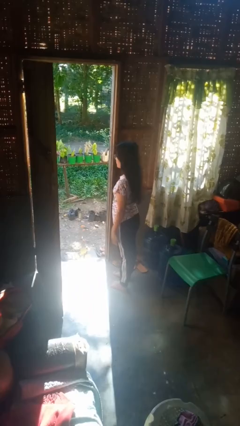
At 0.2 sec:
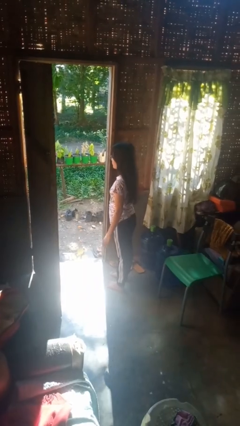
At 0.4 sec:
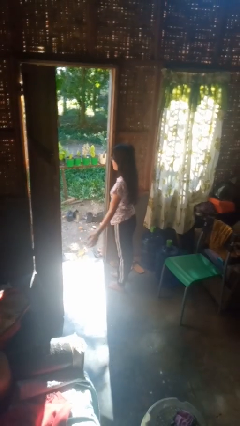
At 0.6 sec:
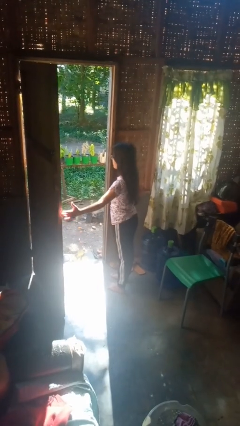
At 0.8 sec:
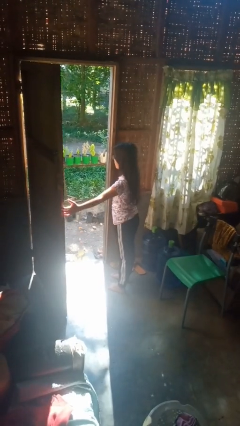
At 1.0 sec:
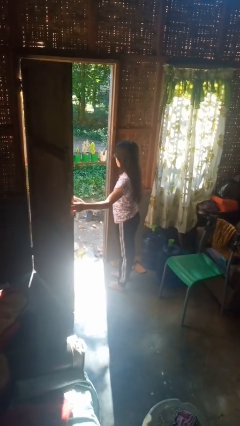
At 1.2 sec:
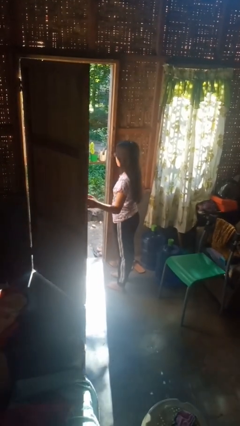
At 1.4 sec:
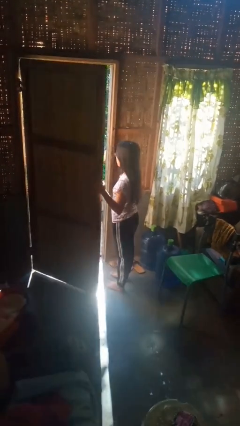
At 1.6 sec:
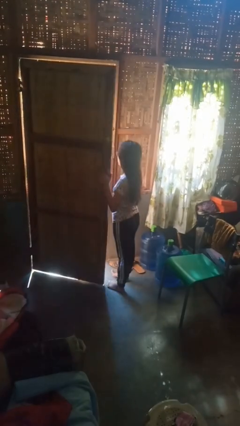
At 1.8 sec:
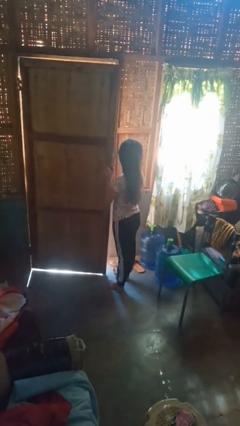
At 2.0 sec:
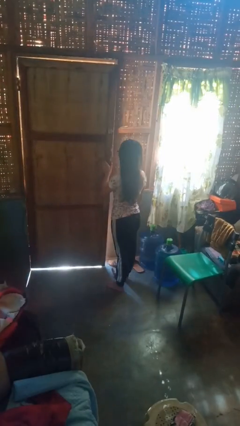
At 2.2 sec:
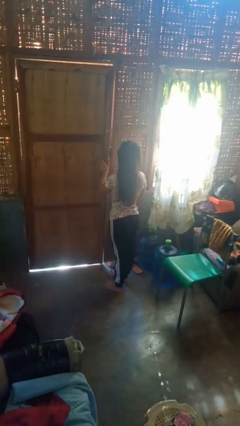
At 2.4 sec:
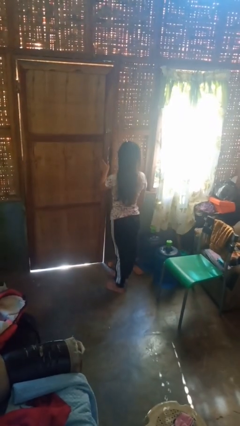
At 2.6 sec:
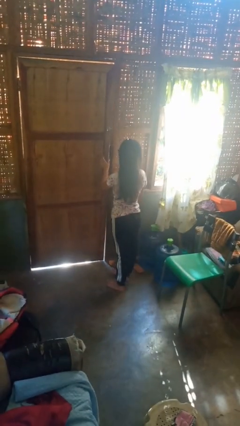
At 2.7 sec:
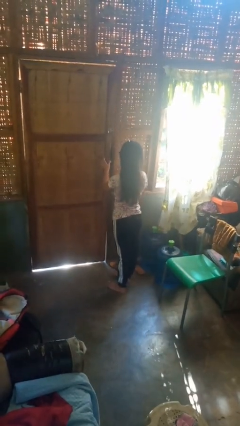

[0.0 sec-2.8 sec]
person closes facility door

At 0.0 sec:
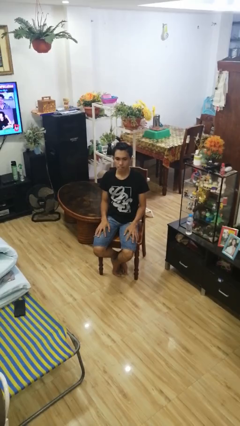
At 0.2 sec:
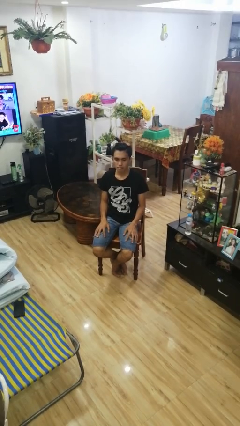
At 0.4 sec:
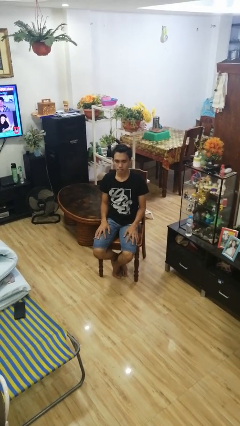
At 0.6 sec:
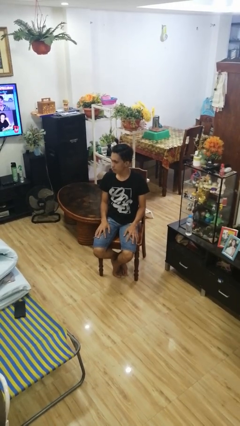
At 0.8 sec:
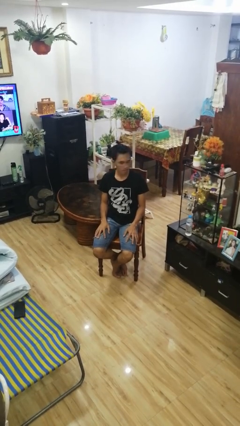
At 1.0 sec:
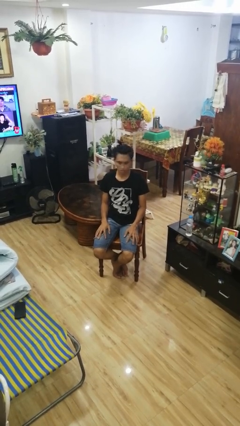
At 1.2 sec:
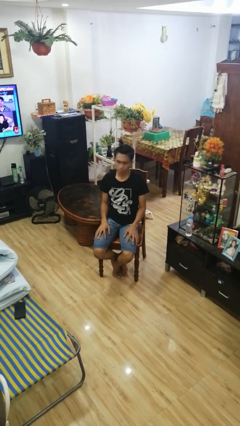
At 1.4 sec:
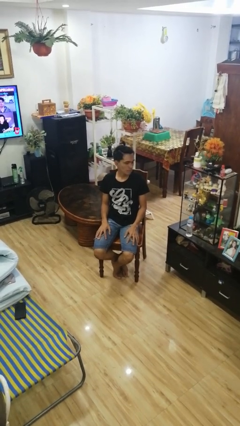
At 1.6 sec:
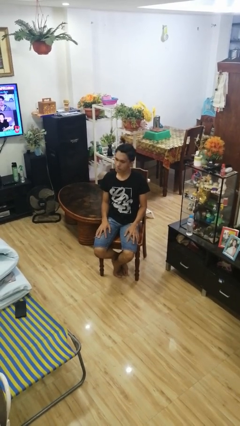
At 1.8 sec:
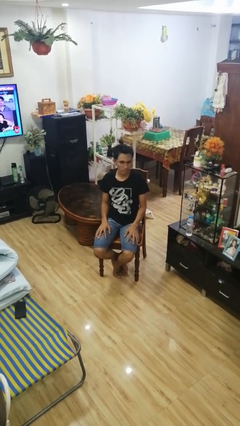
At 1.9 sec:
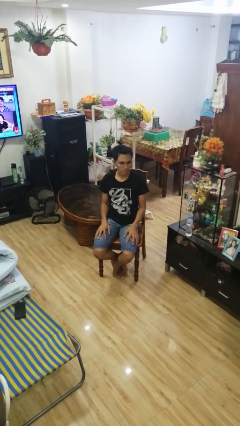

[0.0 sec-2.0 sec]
person shakes head

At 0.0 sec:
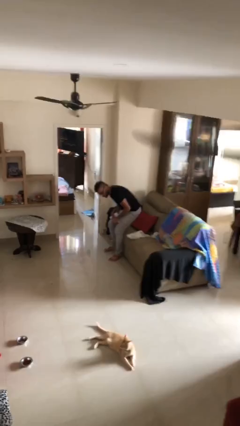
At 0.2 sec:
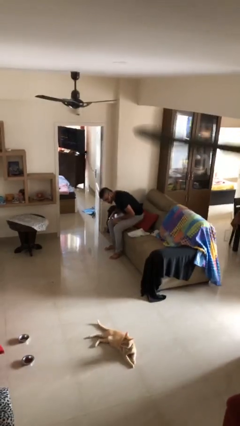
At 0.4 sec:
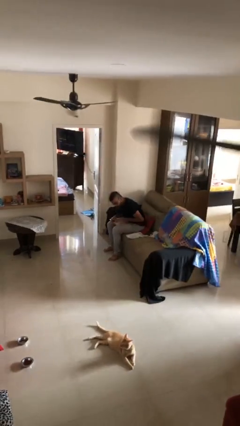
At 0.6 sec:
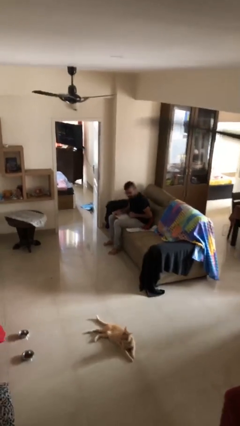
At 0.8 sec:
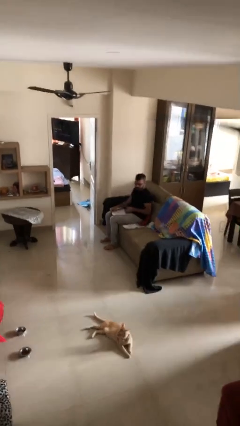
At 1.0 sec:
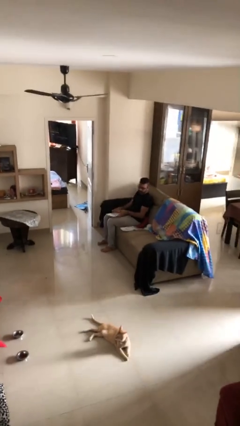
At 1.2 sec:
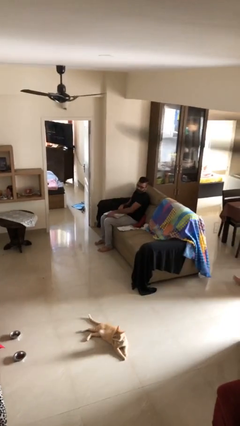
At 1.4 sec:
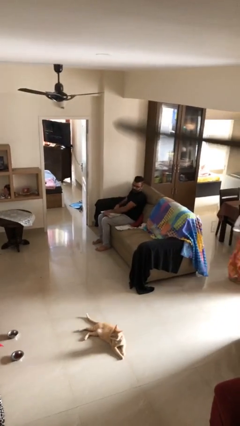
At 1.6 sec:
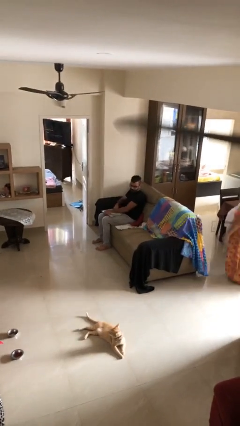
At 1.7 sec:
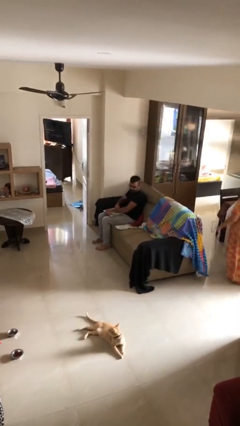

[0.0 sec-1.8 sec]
person sits down

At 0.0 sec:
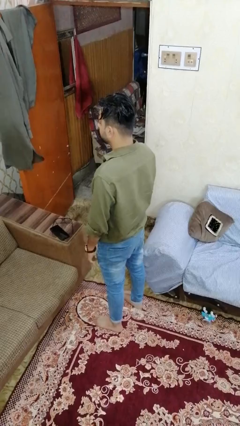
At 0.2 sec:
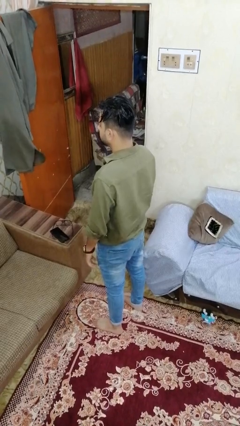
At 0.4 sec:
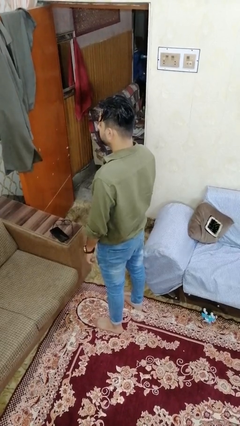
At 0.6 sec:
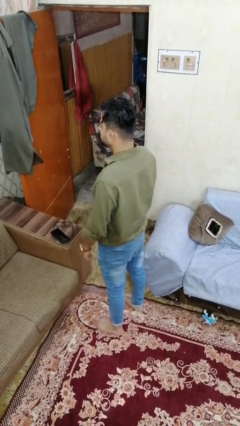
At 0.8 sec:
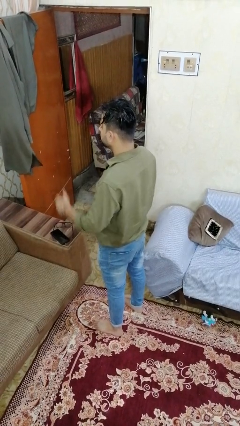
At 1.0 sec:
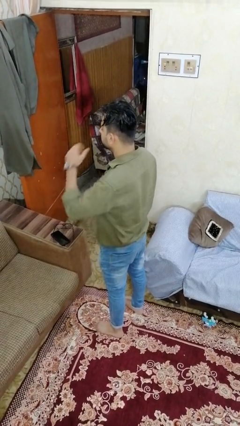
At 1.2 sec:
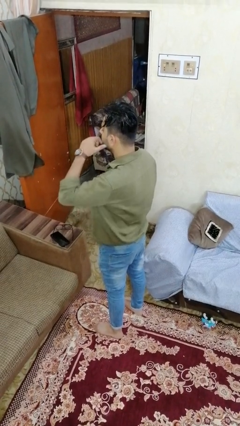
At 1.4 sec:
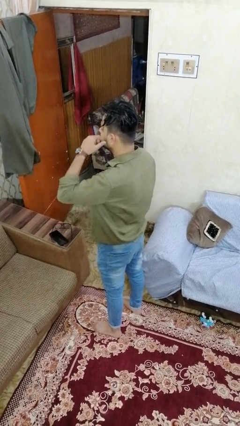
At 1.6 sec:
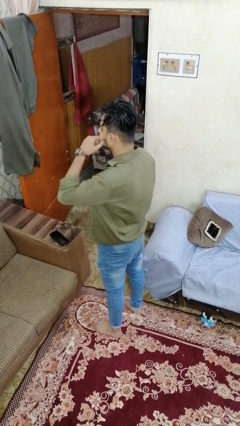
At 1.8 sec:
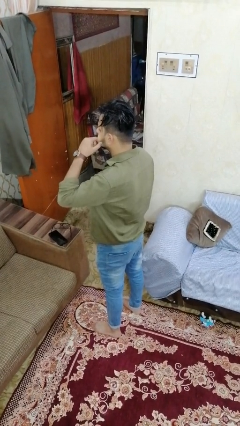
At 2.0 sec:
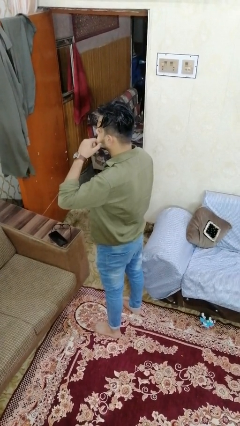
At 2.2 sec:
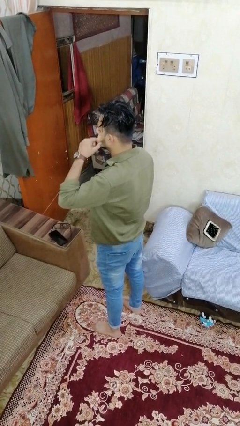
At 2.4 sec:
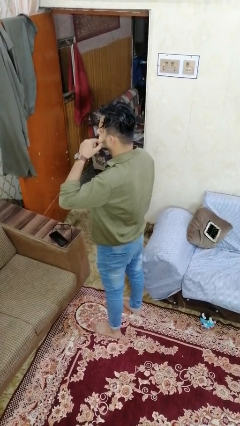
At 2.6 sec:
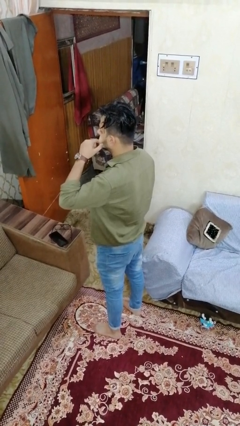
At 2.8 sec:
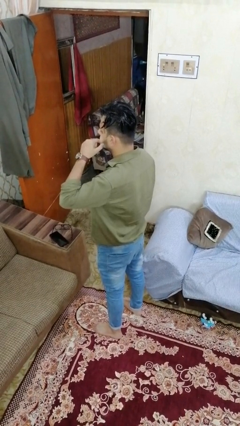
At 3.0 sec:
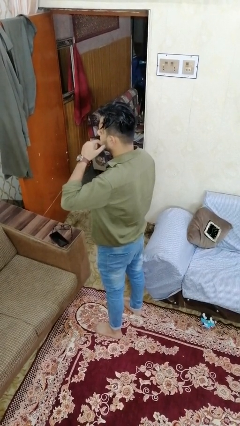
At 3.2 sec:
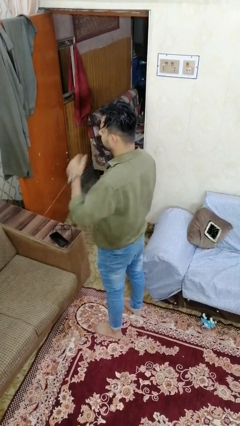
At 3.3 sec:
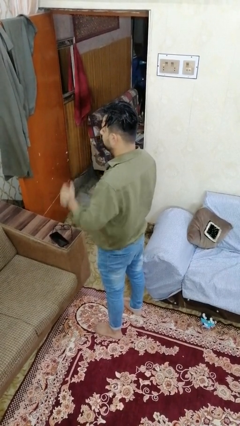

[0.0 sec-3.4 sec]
person scratches face

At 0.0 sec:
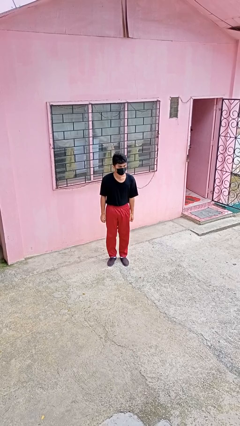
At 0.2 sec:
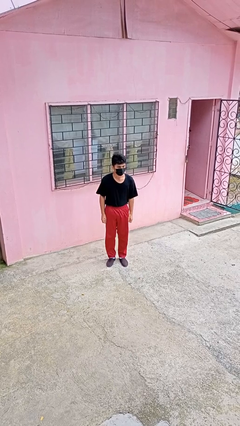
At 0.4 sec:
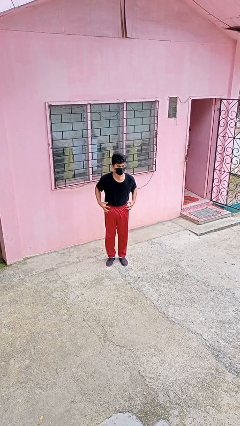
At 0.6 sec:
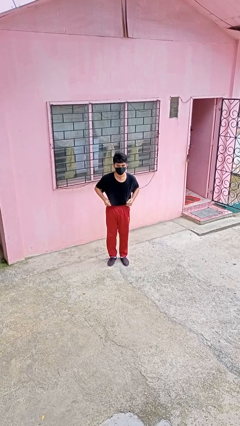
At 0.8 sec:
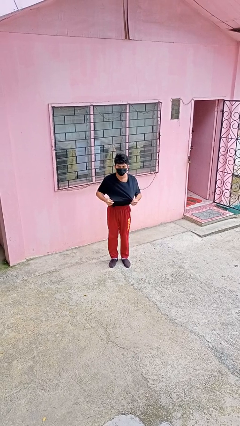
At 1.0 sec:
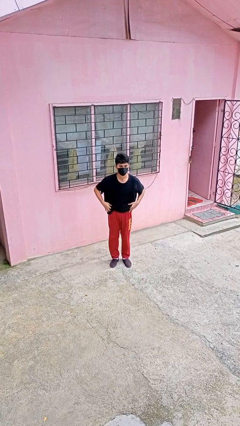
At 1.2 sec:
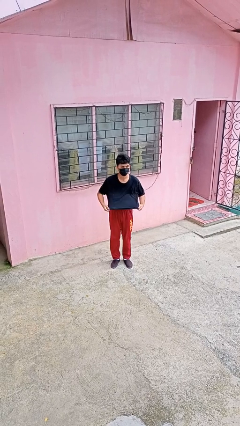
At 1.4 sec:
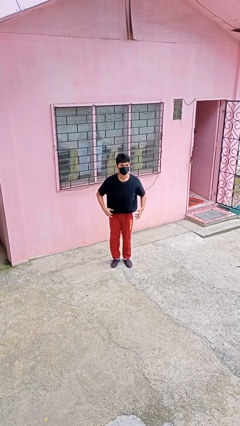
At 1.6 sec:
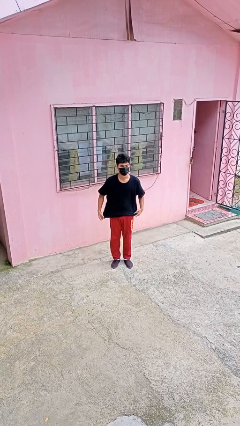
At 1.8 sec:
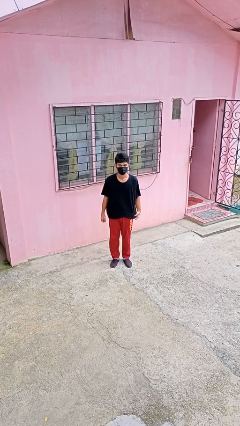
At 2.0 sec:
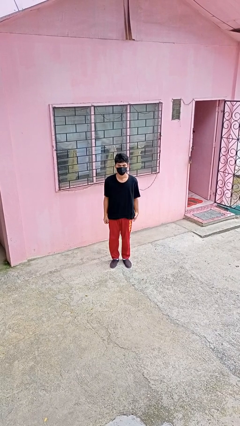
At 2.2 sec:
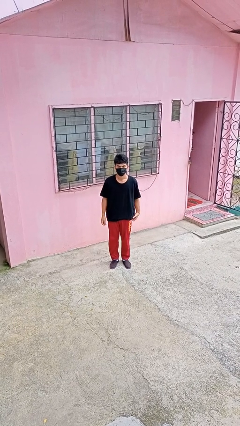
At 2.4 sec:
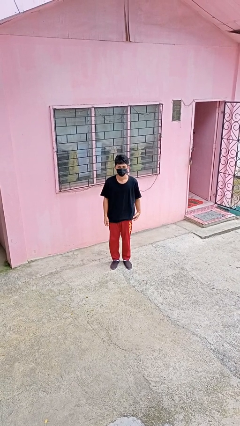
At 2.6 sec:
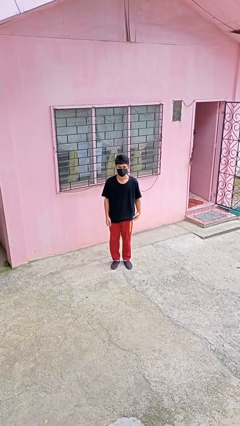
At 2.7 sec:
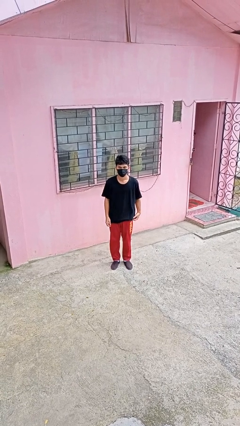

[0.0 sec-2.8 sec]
person untucks shirt

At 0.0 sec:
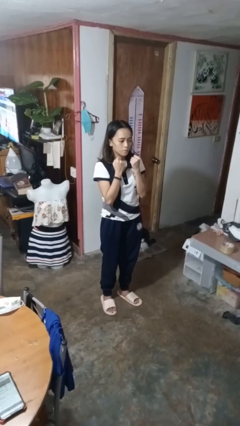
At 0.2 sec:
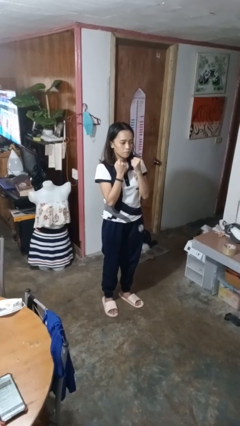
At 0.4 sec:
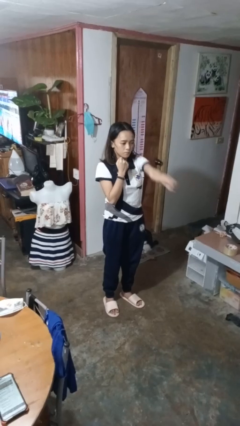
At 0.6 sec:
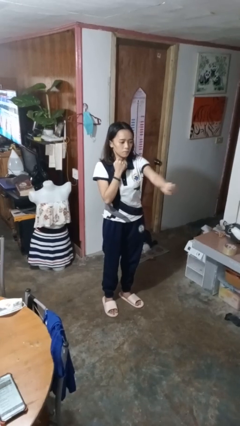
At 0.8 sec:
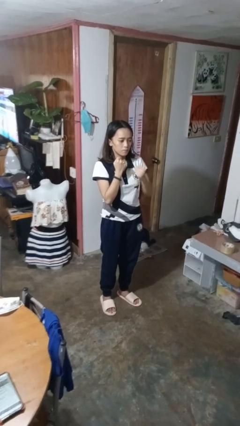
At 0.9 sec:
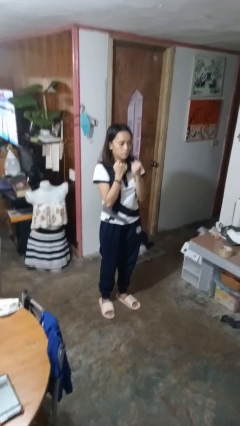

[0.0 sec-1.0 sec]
person punches

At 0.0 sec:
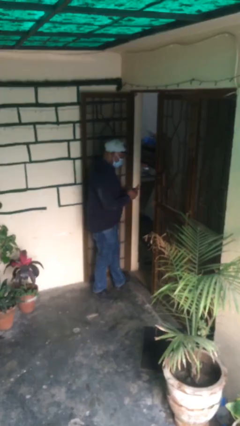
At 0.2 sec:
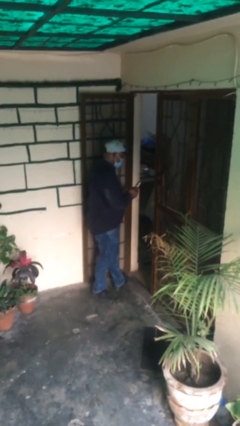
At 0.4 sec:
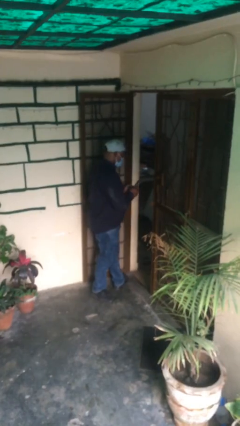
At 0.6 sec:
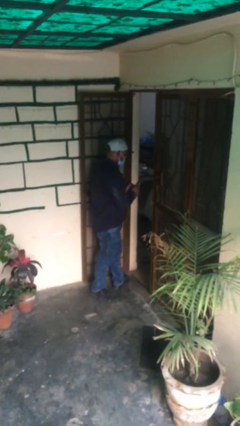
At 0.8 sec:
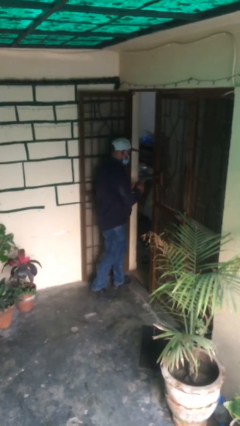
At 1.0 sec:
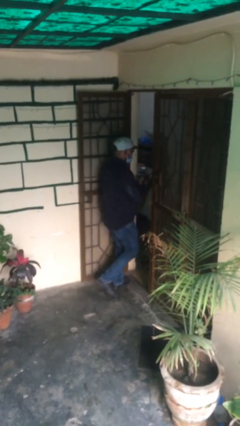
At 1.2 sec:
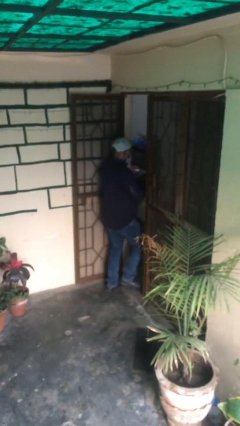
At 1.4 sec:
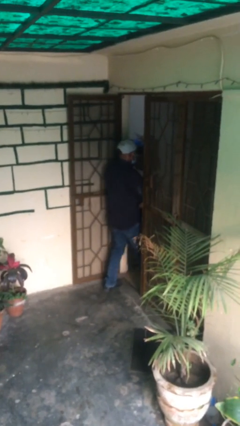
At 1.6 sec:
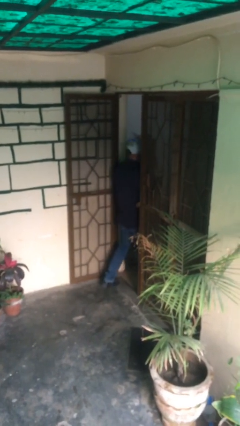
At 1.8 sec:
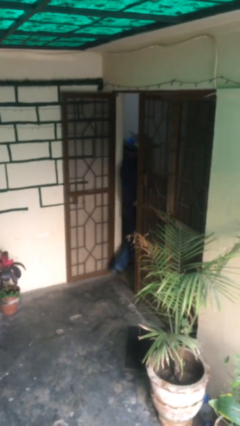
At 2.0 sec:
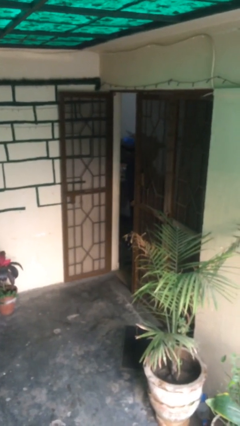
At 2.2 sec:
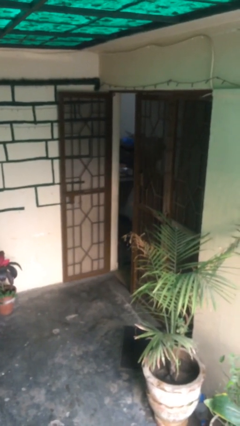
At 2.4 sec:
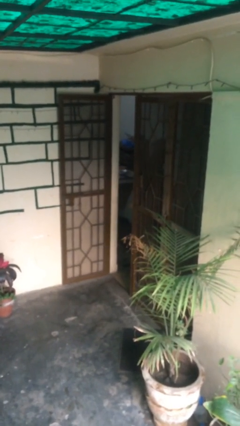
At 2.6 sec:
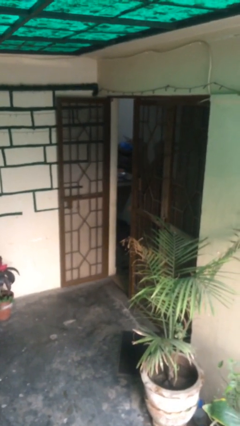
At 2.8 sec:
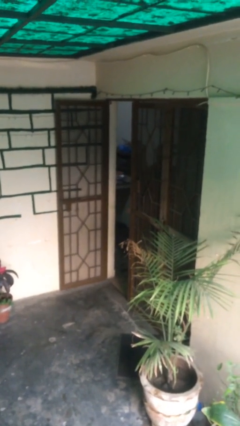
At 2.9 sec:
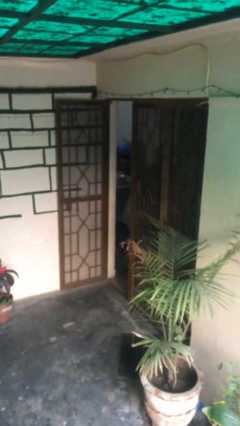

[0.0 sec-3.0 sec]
person exits scene through structure
